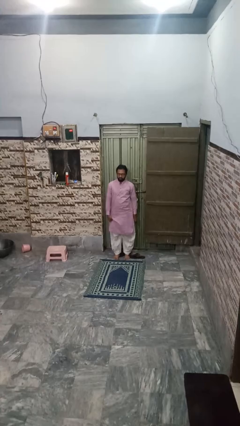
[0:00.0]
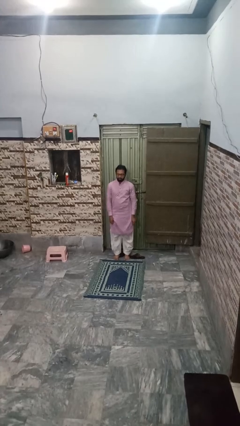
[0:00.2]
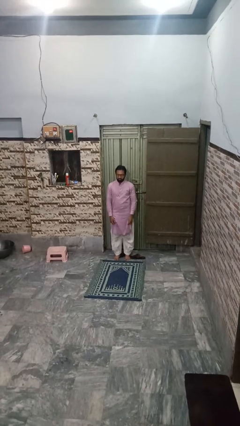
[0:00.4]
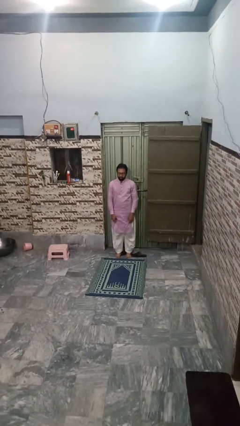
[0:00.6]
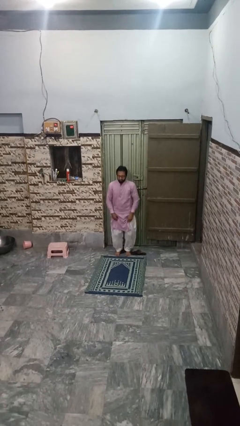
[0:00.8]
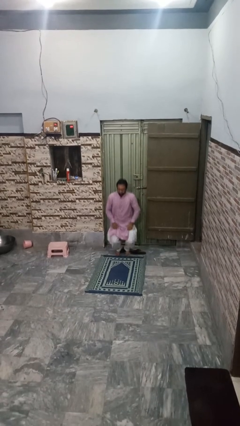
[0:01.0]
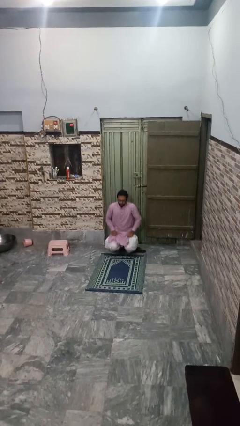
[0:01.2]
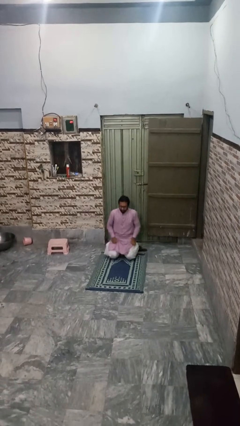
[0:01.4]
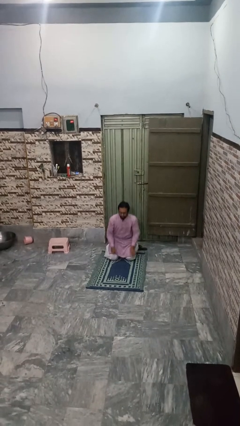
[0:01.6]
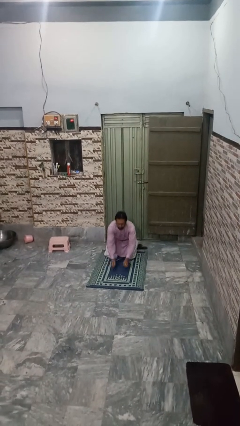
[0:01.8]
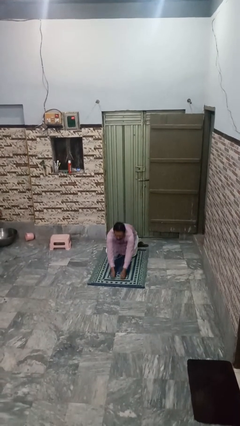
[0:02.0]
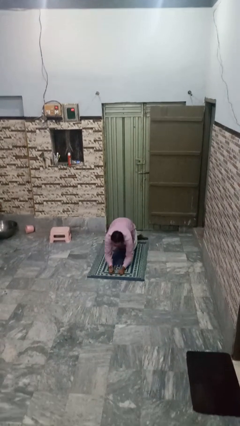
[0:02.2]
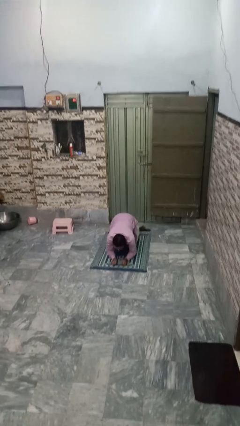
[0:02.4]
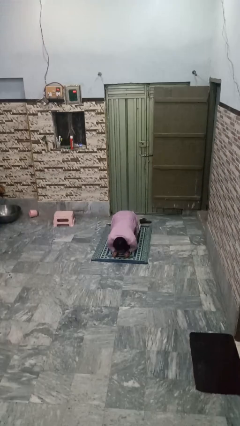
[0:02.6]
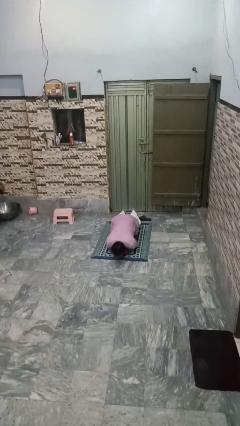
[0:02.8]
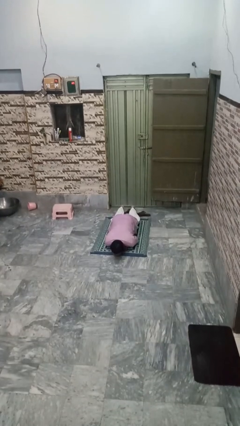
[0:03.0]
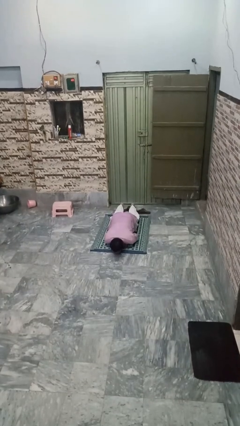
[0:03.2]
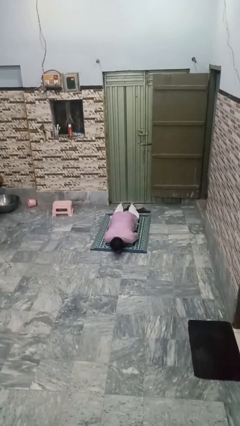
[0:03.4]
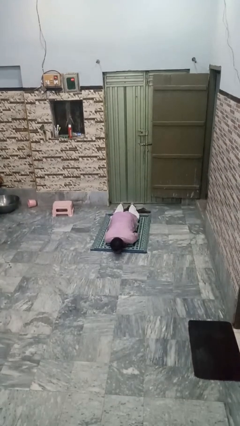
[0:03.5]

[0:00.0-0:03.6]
person exercises with plank

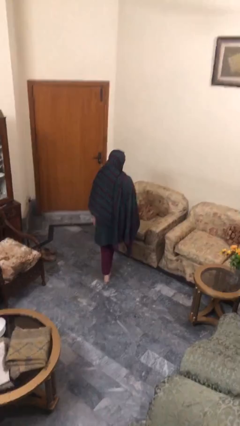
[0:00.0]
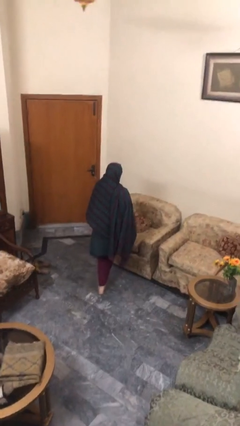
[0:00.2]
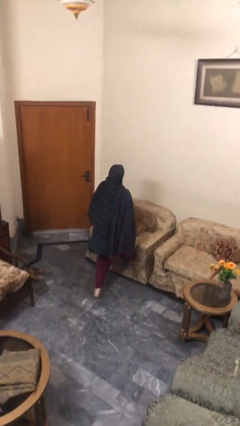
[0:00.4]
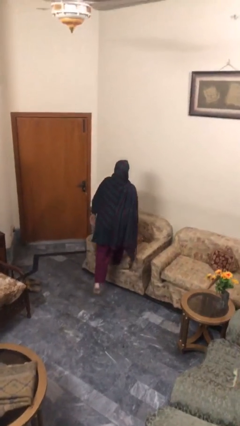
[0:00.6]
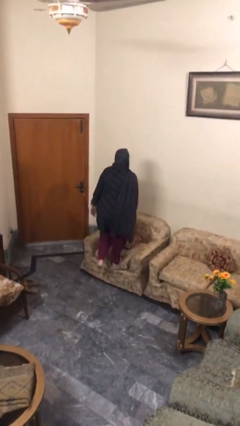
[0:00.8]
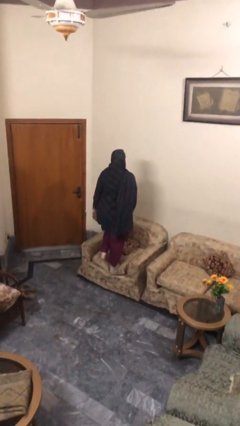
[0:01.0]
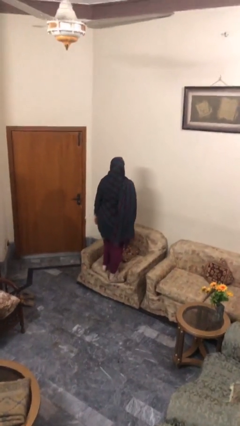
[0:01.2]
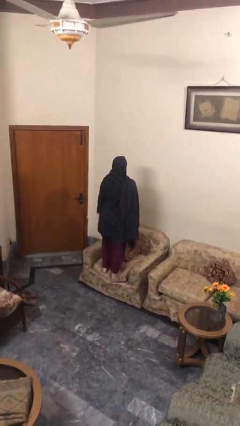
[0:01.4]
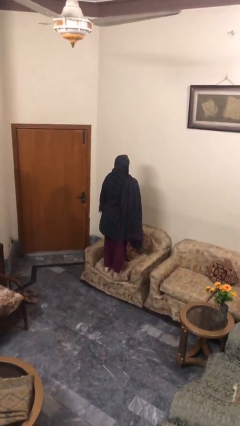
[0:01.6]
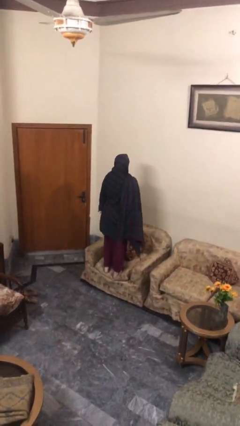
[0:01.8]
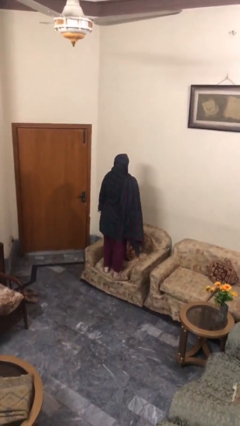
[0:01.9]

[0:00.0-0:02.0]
person climbs on couch

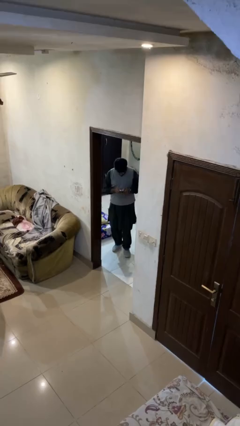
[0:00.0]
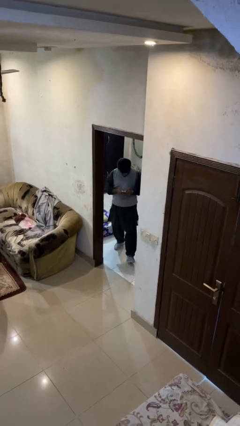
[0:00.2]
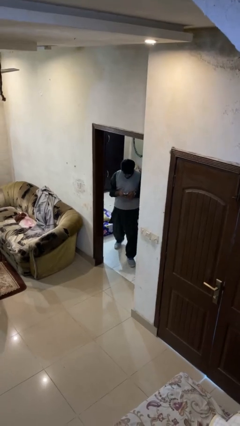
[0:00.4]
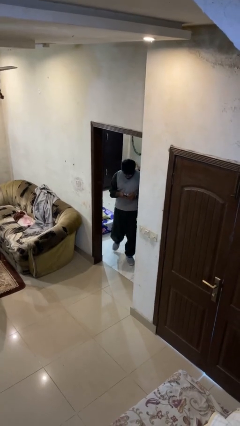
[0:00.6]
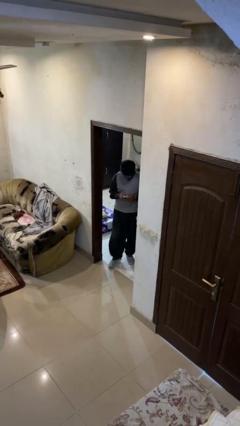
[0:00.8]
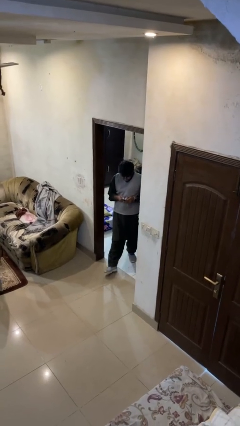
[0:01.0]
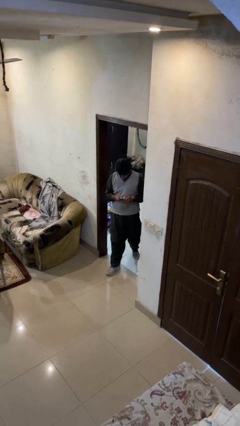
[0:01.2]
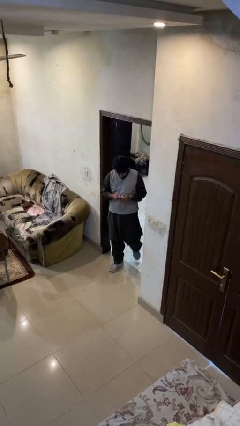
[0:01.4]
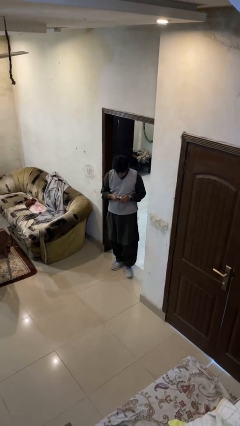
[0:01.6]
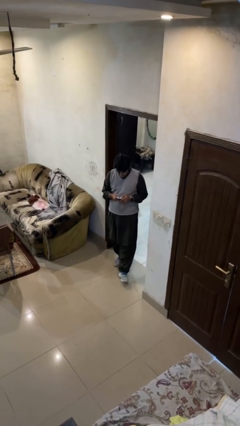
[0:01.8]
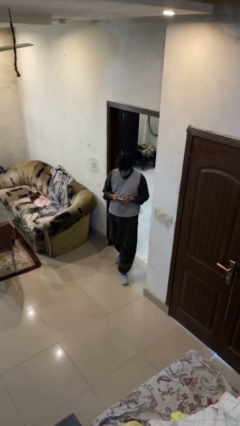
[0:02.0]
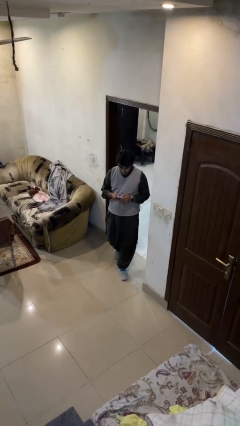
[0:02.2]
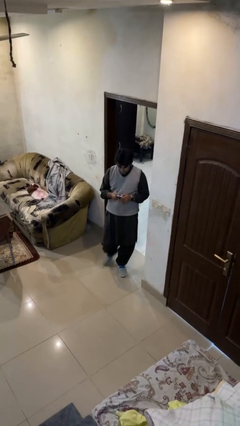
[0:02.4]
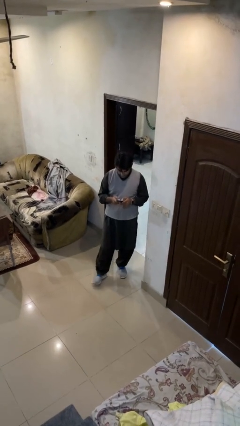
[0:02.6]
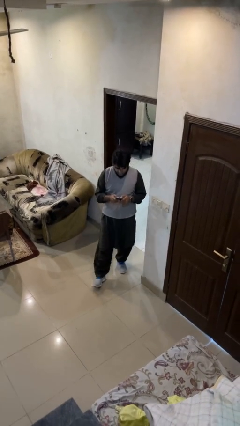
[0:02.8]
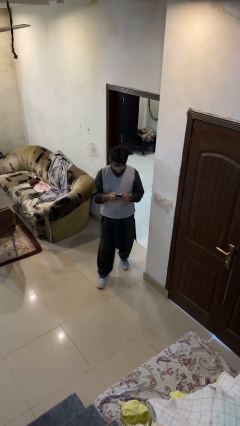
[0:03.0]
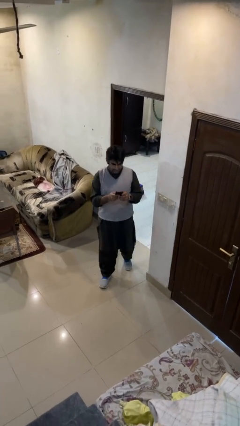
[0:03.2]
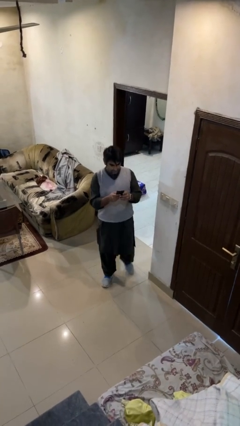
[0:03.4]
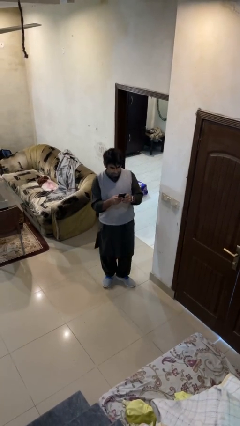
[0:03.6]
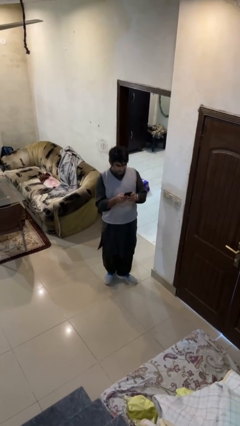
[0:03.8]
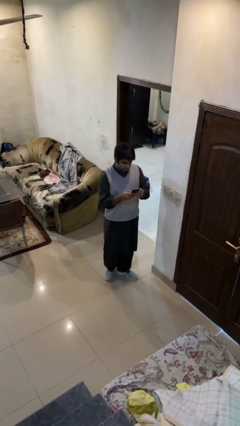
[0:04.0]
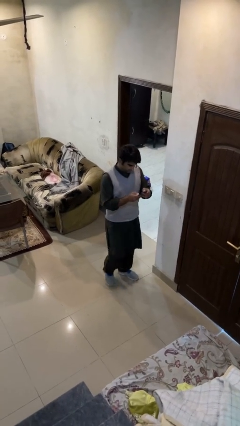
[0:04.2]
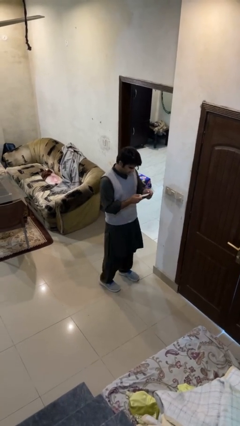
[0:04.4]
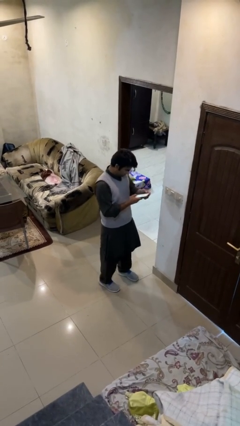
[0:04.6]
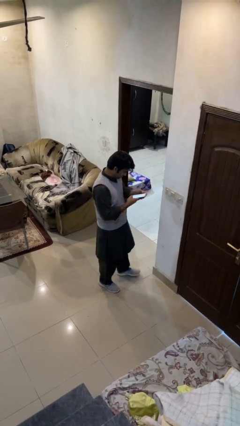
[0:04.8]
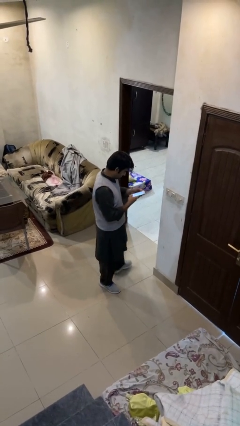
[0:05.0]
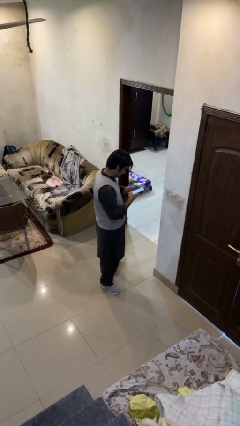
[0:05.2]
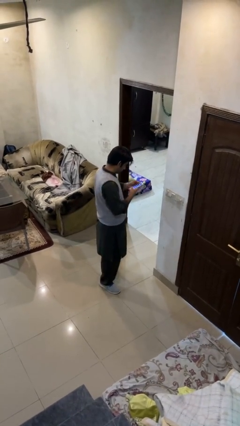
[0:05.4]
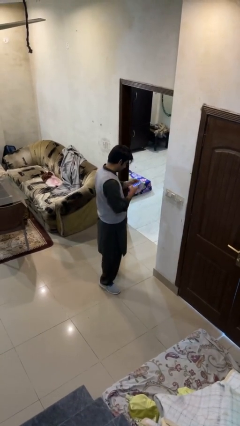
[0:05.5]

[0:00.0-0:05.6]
person enters scene through structure

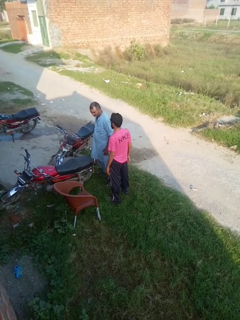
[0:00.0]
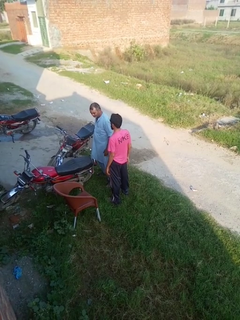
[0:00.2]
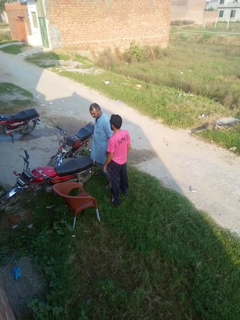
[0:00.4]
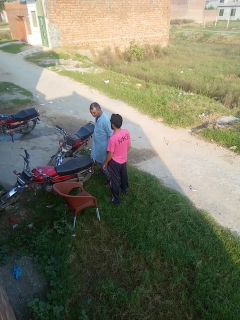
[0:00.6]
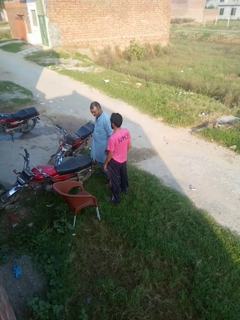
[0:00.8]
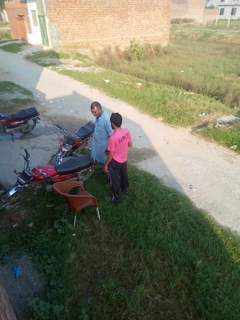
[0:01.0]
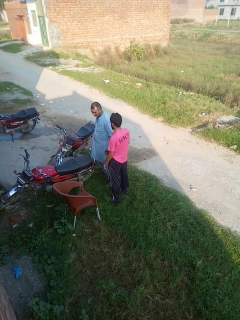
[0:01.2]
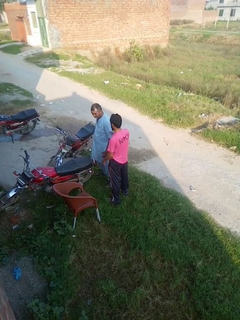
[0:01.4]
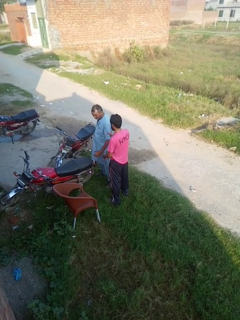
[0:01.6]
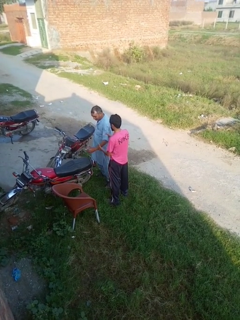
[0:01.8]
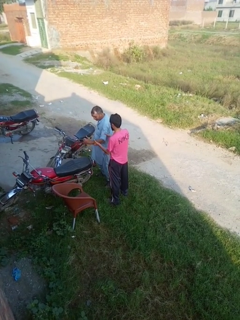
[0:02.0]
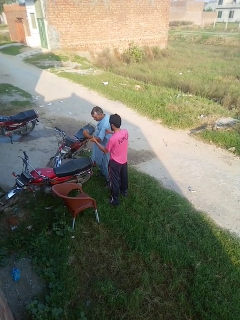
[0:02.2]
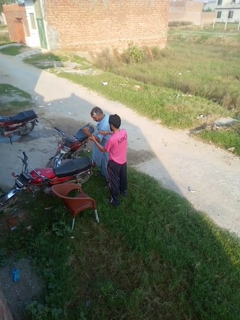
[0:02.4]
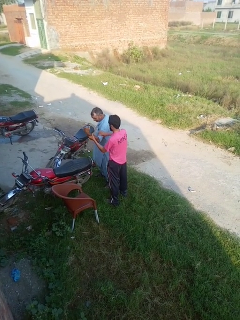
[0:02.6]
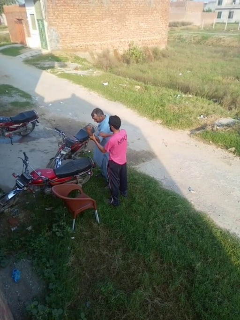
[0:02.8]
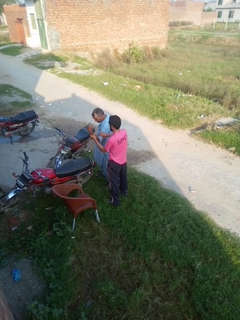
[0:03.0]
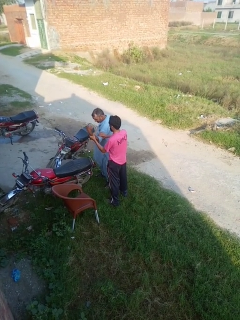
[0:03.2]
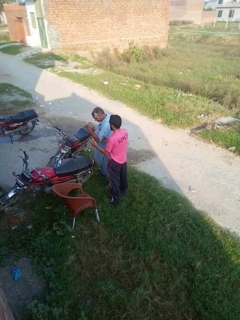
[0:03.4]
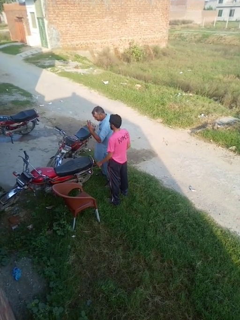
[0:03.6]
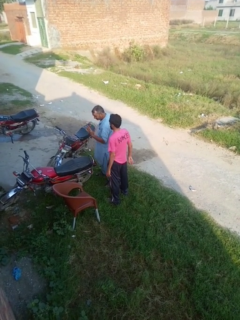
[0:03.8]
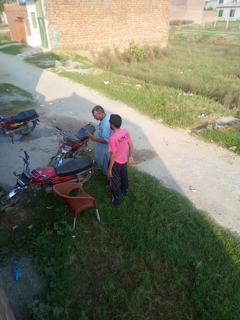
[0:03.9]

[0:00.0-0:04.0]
person grabs person by bicep

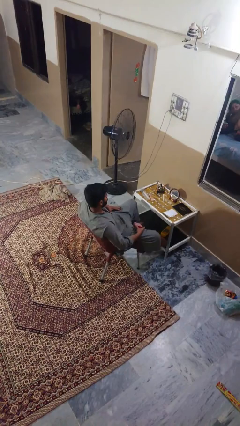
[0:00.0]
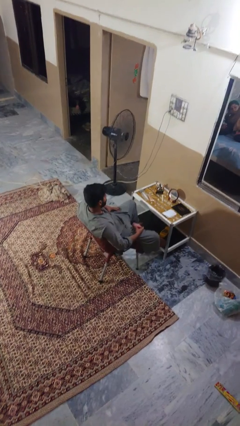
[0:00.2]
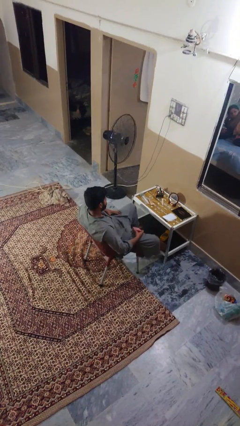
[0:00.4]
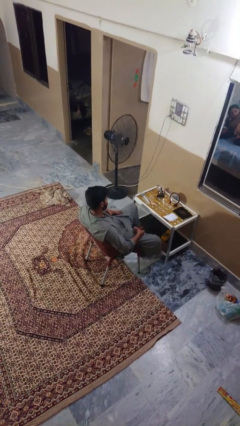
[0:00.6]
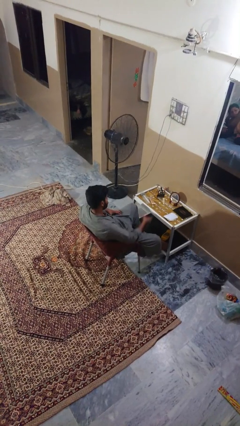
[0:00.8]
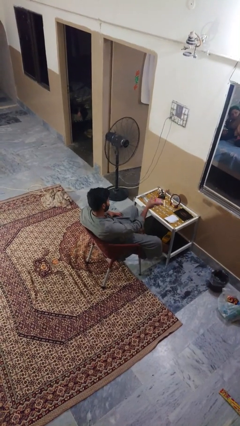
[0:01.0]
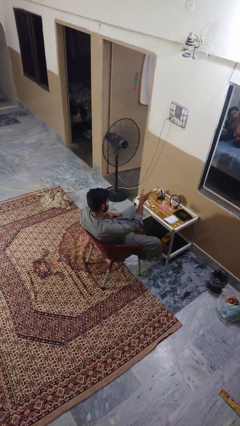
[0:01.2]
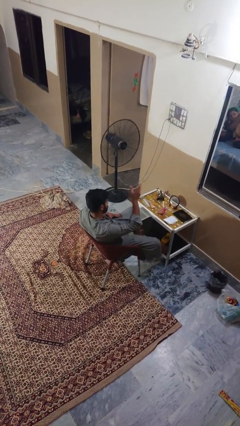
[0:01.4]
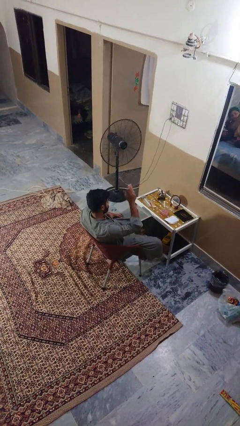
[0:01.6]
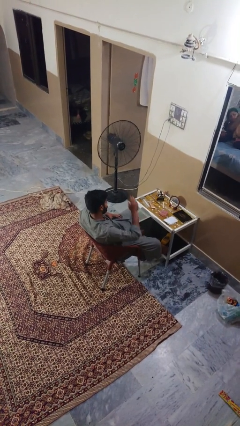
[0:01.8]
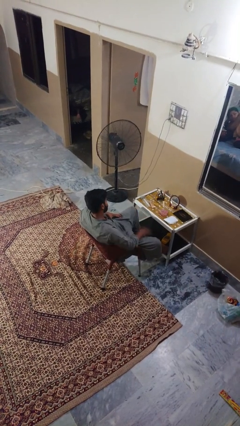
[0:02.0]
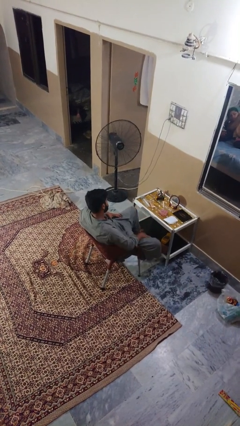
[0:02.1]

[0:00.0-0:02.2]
person throws object on table

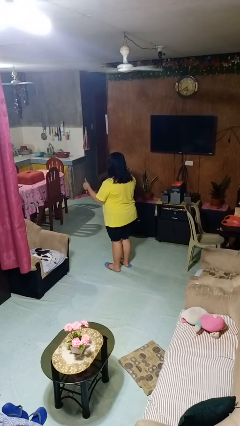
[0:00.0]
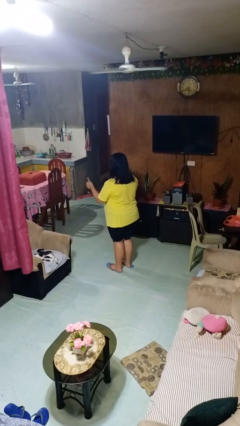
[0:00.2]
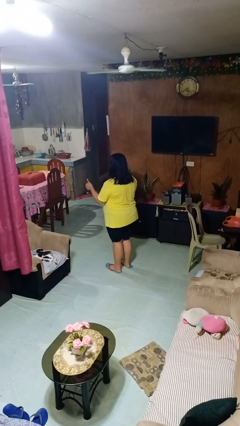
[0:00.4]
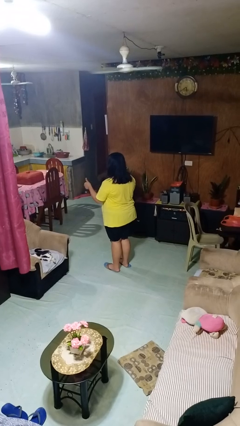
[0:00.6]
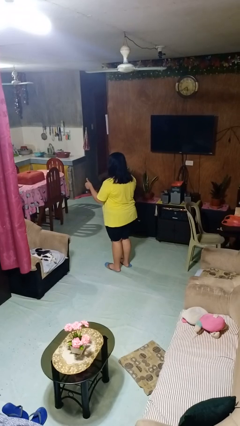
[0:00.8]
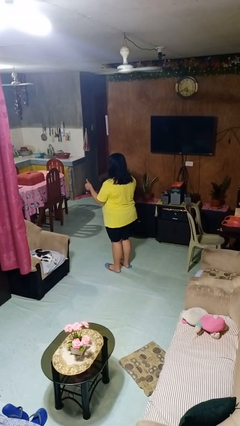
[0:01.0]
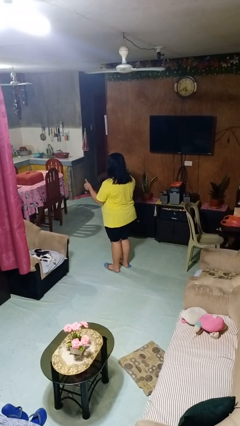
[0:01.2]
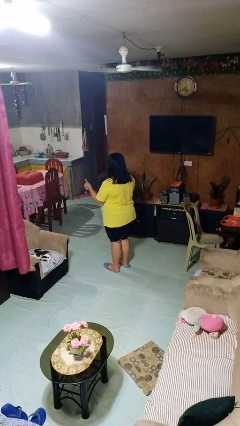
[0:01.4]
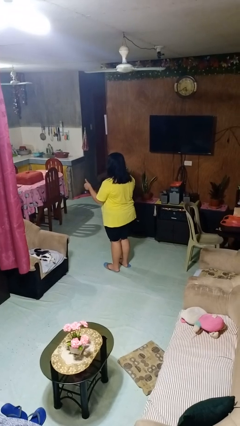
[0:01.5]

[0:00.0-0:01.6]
person gestures thumbs up
